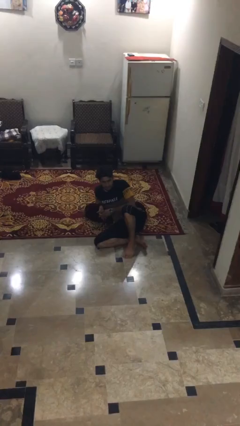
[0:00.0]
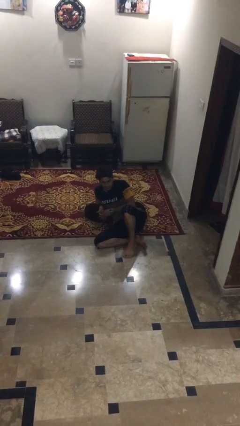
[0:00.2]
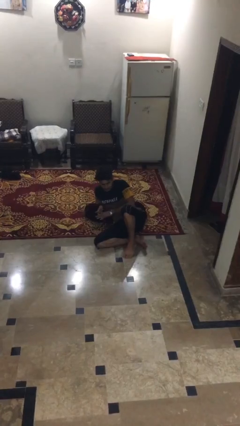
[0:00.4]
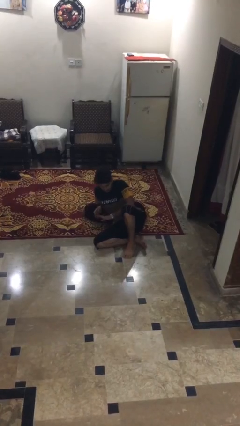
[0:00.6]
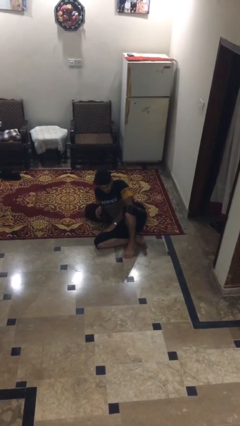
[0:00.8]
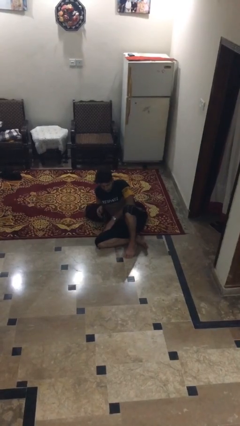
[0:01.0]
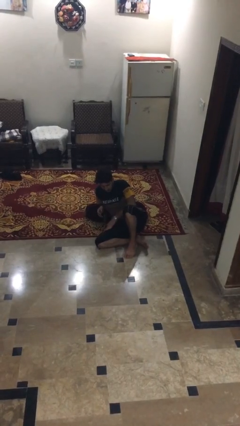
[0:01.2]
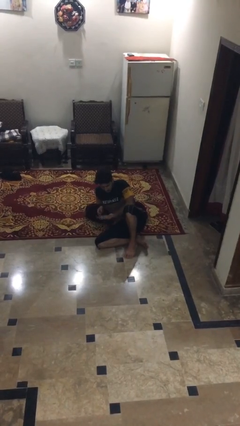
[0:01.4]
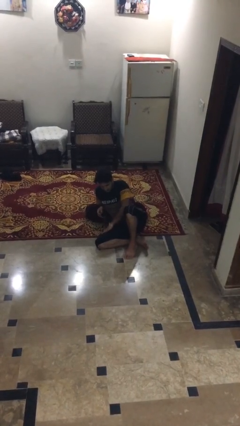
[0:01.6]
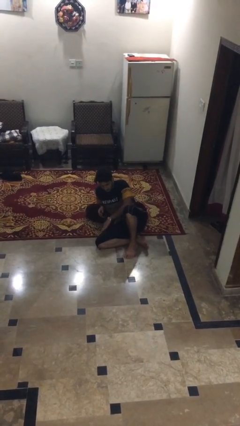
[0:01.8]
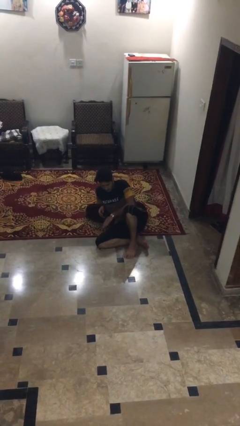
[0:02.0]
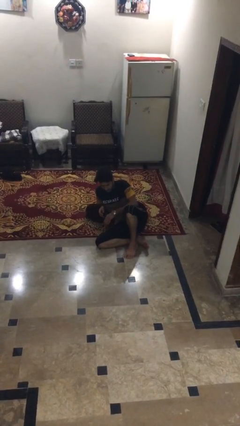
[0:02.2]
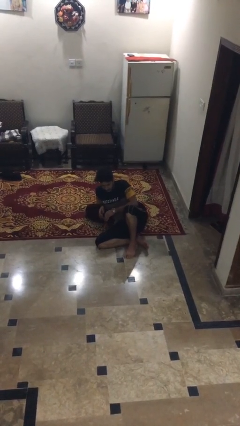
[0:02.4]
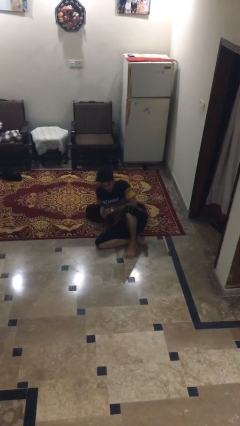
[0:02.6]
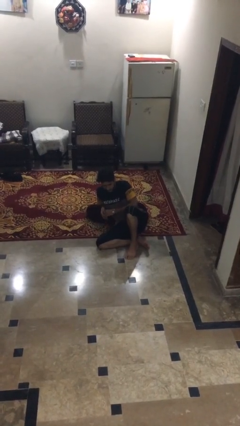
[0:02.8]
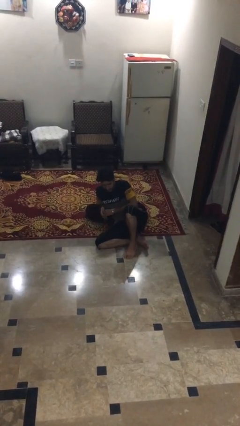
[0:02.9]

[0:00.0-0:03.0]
person swats bug

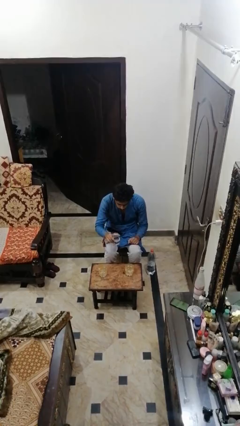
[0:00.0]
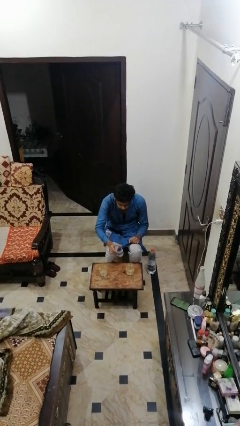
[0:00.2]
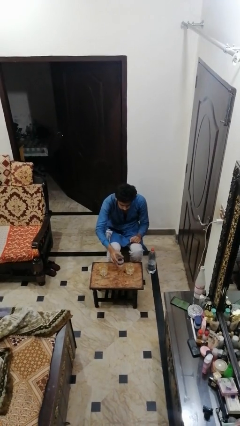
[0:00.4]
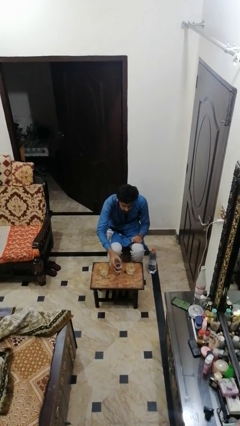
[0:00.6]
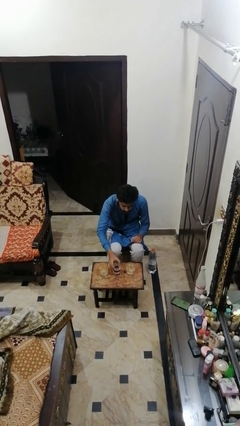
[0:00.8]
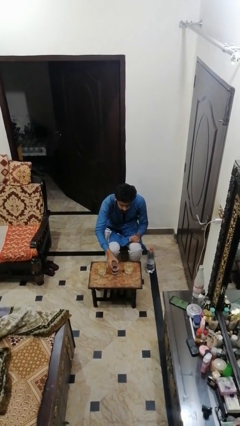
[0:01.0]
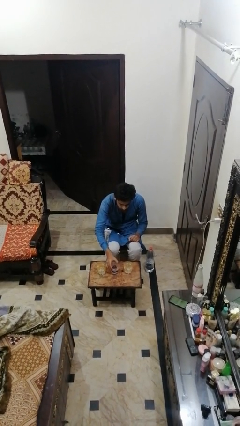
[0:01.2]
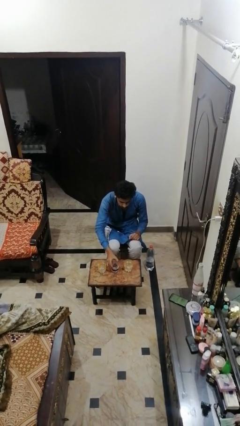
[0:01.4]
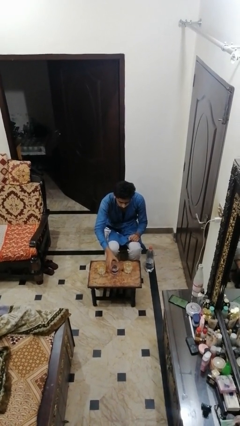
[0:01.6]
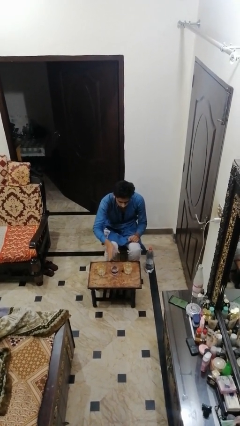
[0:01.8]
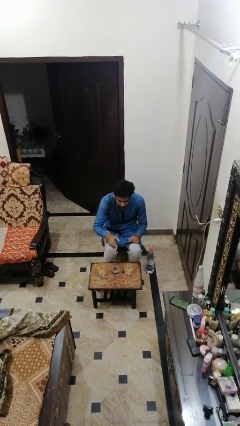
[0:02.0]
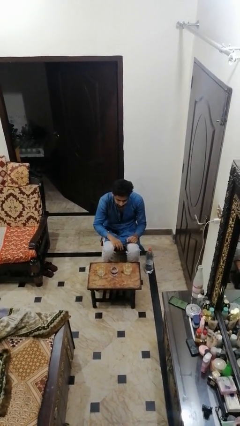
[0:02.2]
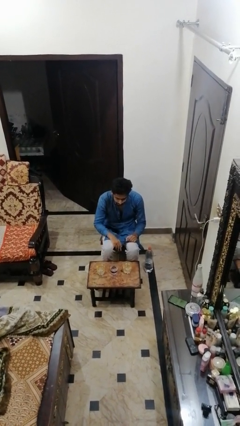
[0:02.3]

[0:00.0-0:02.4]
person puts down object on table

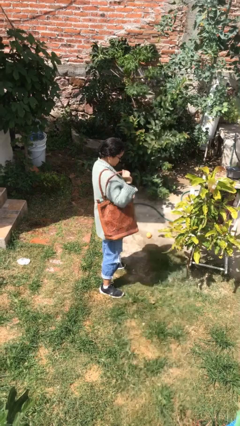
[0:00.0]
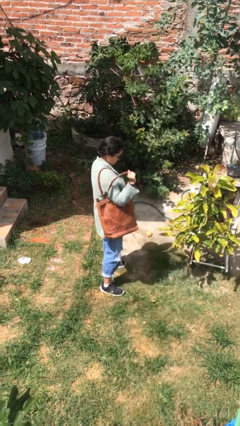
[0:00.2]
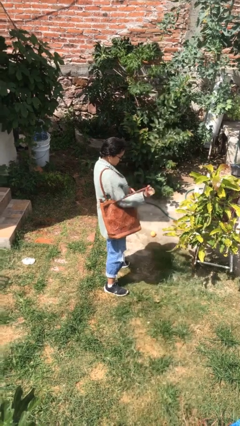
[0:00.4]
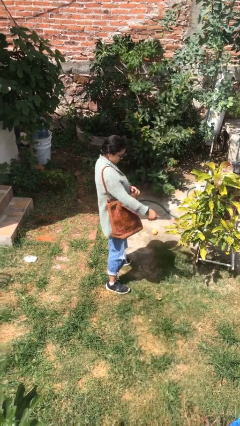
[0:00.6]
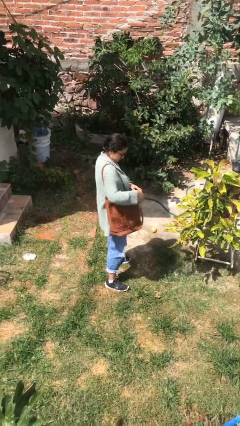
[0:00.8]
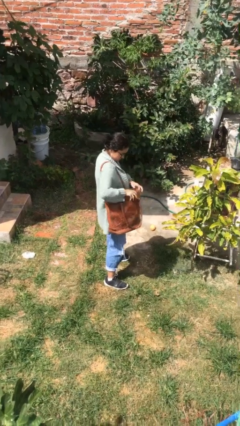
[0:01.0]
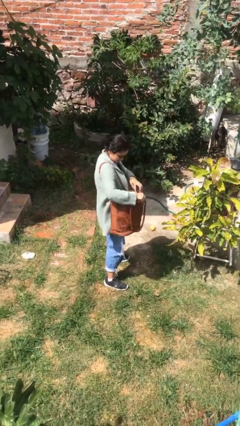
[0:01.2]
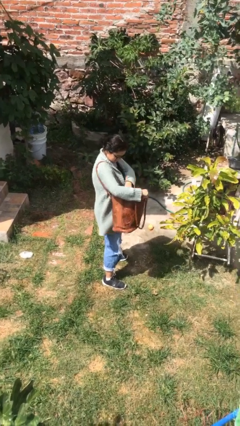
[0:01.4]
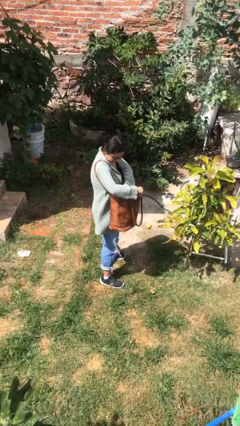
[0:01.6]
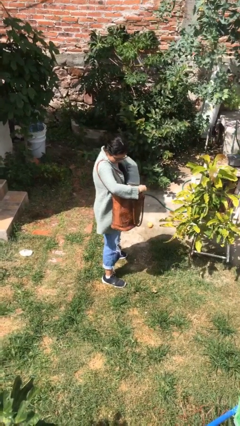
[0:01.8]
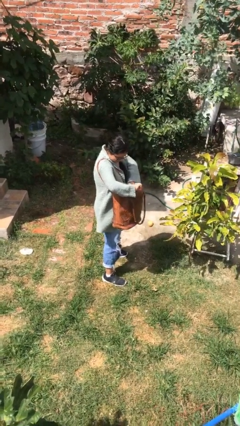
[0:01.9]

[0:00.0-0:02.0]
person searches in purse

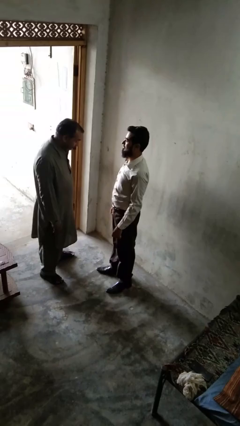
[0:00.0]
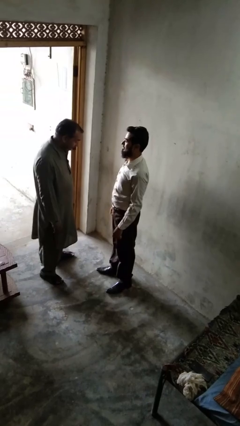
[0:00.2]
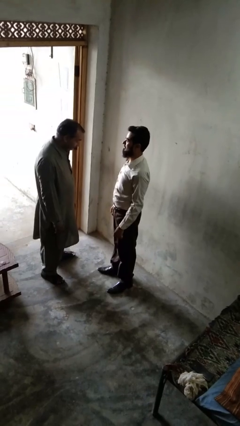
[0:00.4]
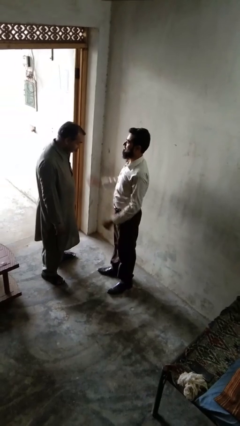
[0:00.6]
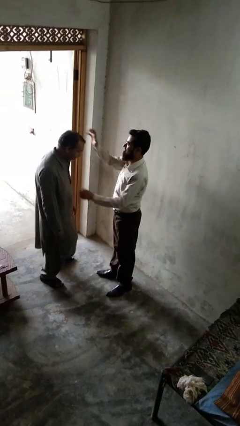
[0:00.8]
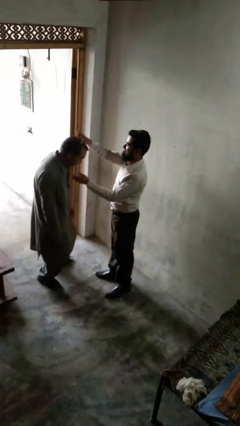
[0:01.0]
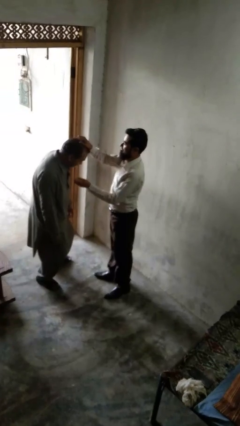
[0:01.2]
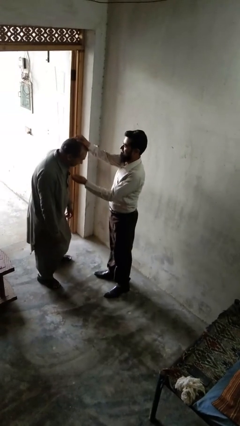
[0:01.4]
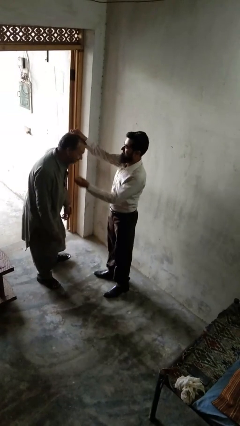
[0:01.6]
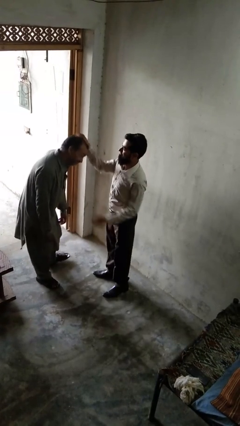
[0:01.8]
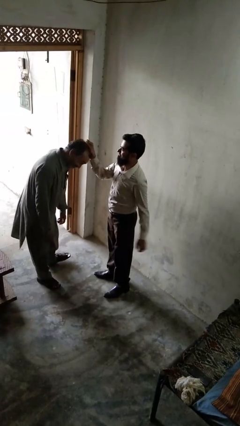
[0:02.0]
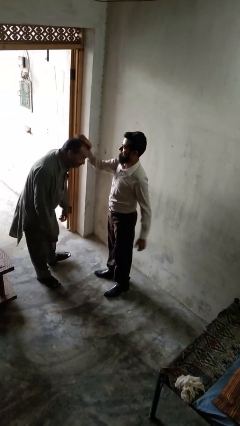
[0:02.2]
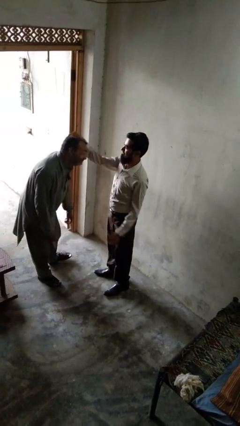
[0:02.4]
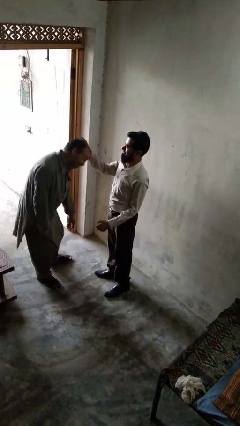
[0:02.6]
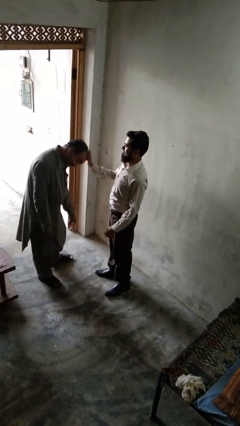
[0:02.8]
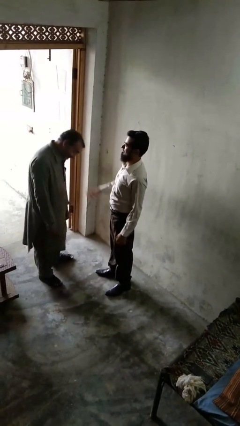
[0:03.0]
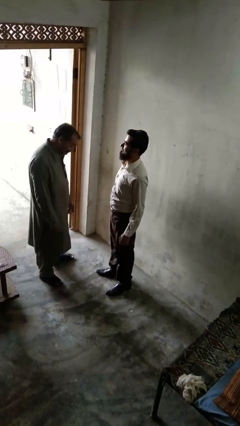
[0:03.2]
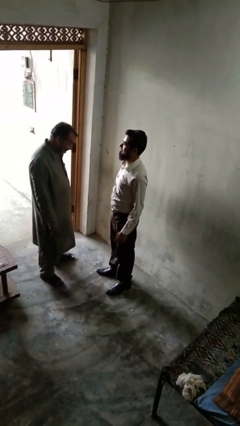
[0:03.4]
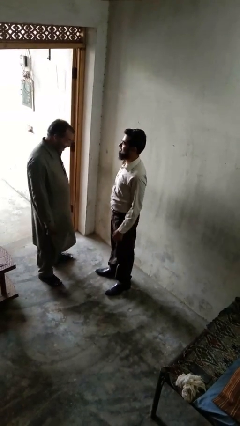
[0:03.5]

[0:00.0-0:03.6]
person grabs person by hair

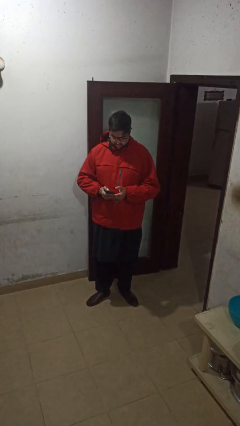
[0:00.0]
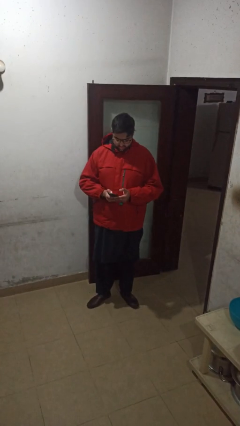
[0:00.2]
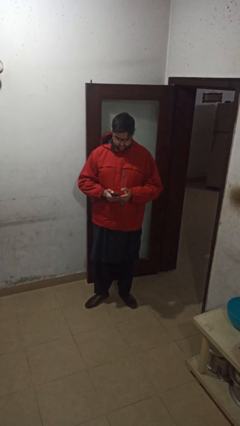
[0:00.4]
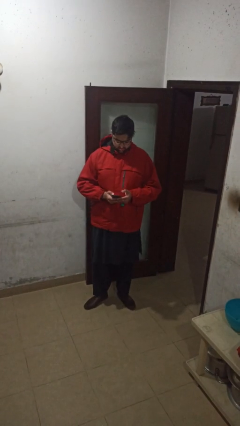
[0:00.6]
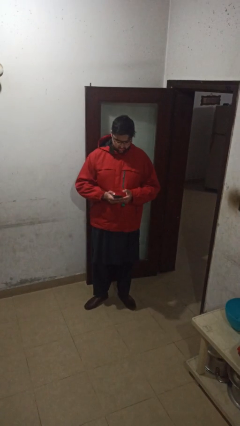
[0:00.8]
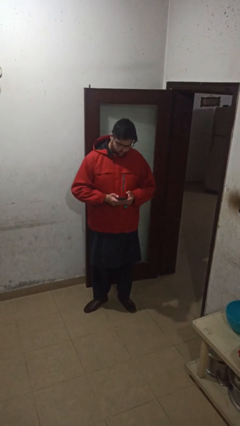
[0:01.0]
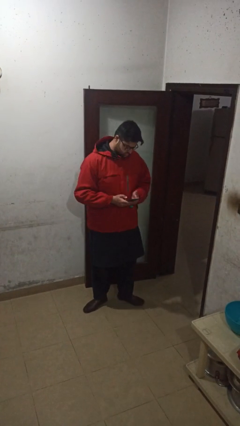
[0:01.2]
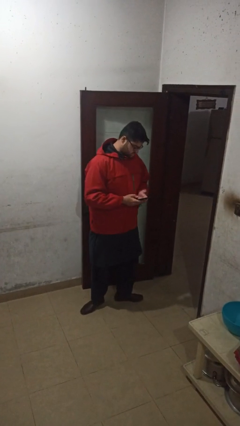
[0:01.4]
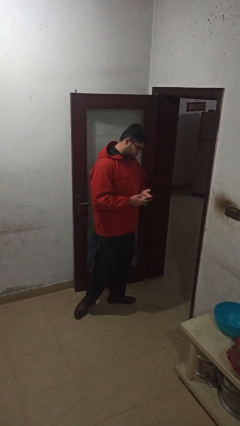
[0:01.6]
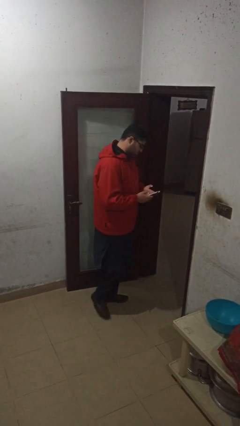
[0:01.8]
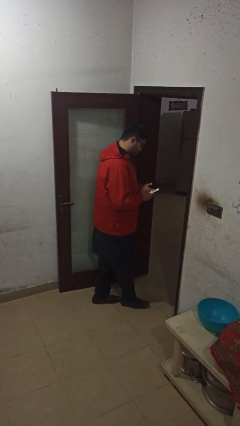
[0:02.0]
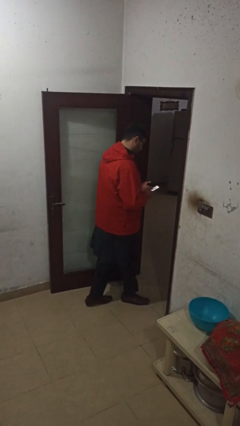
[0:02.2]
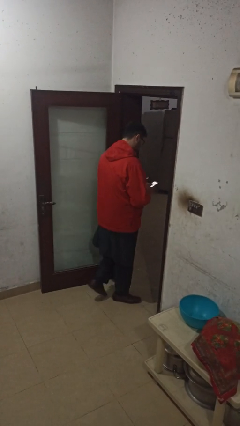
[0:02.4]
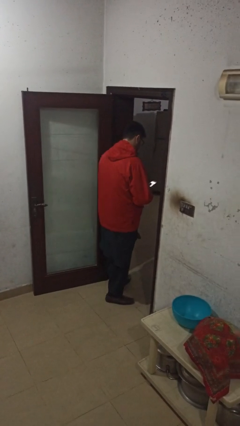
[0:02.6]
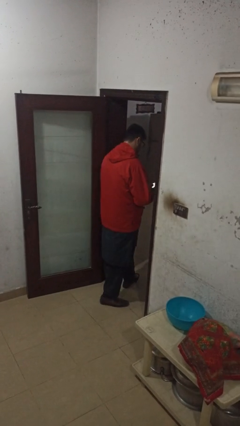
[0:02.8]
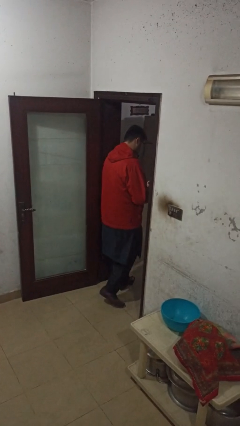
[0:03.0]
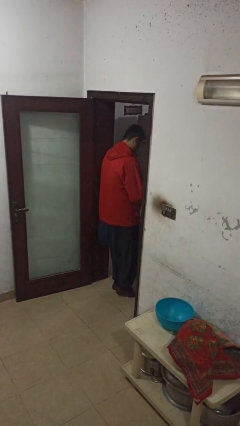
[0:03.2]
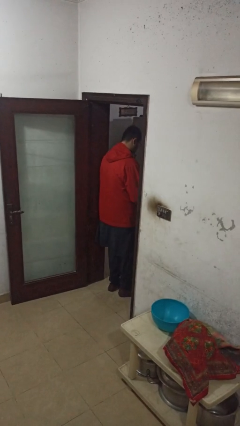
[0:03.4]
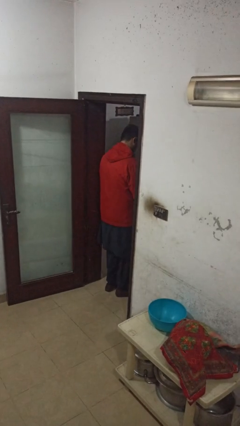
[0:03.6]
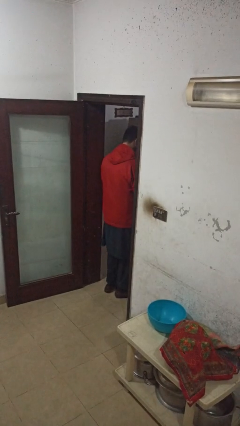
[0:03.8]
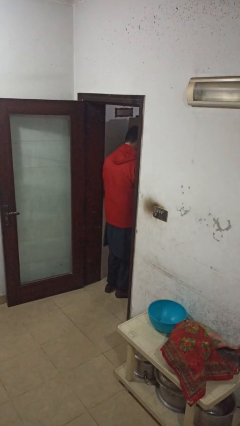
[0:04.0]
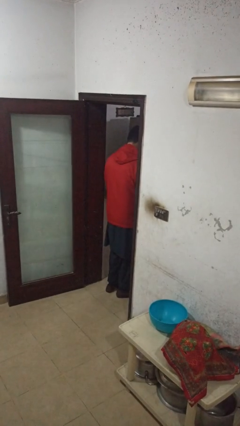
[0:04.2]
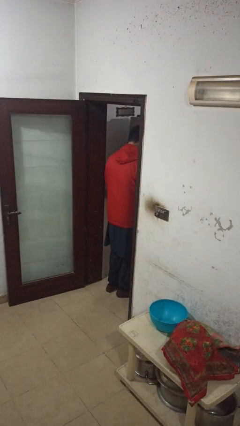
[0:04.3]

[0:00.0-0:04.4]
person exits scene through structure

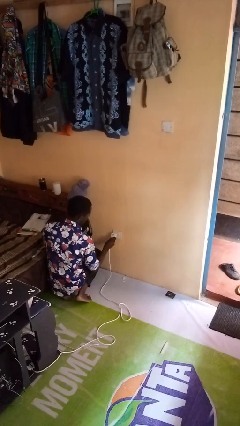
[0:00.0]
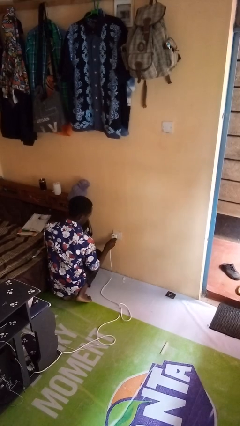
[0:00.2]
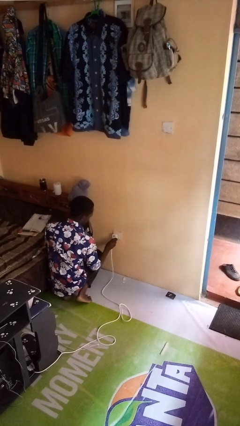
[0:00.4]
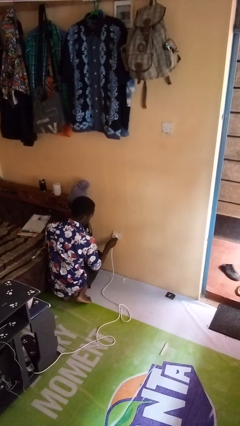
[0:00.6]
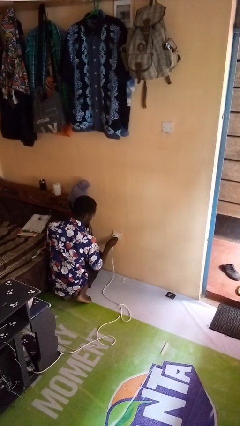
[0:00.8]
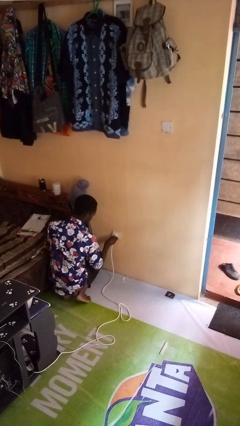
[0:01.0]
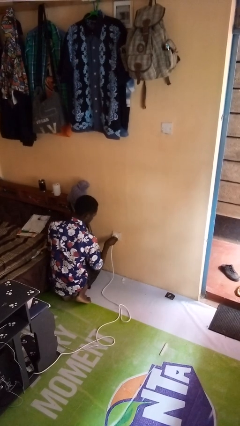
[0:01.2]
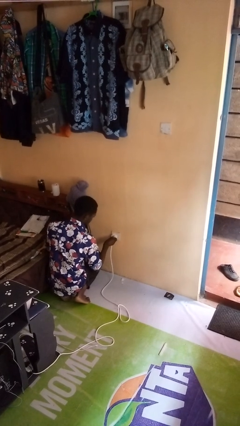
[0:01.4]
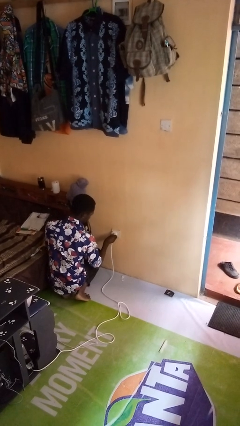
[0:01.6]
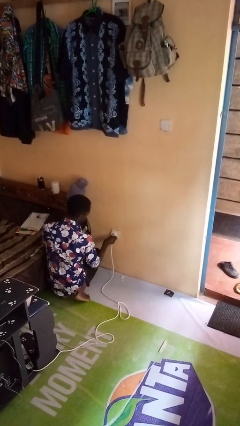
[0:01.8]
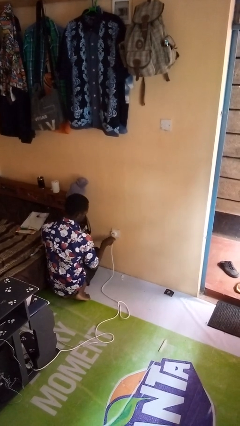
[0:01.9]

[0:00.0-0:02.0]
person plugs into electrical socket
